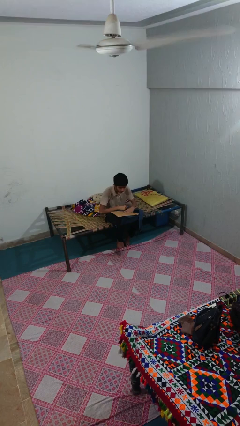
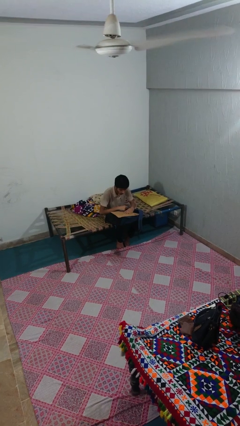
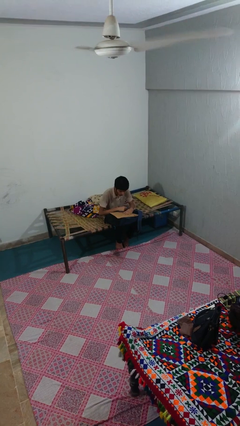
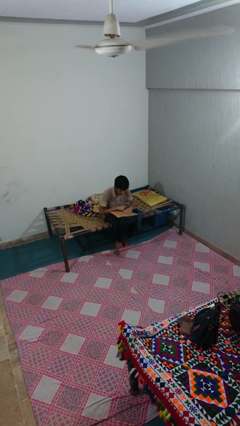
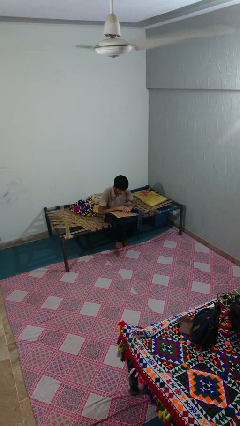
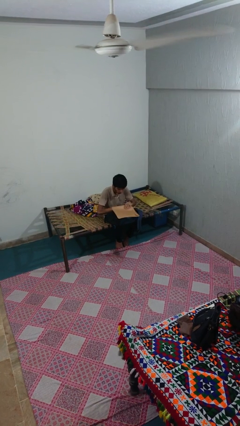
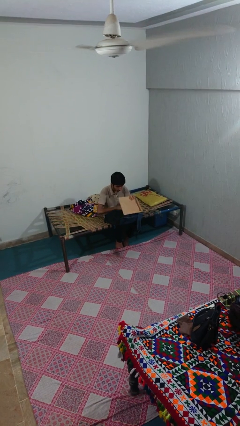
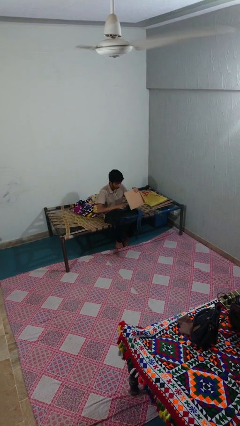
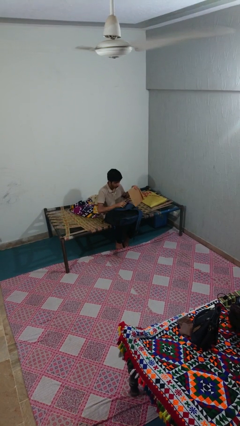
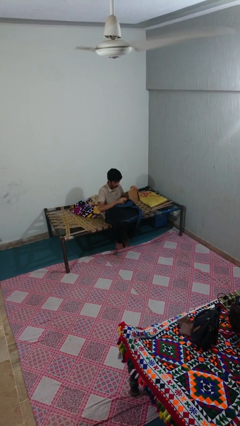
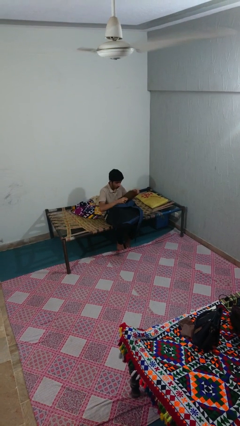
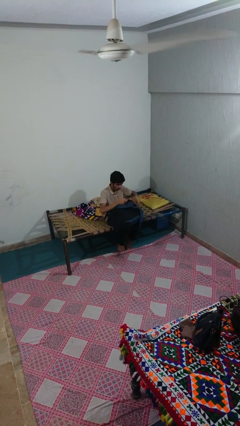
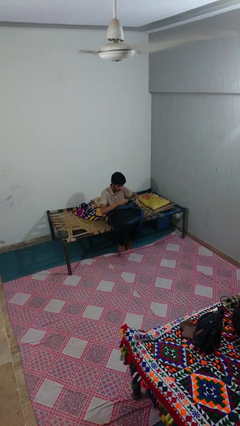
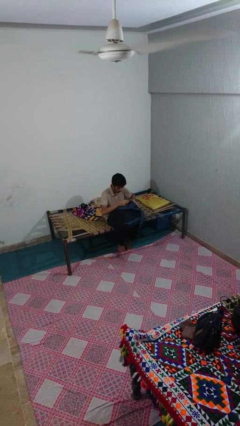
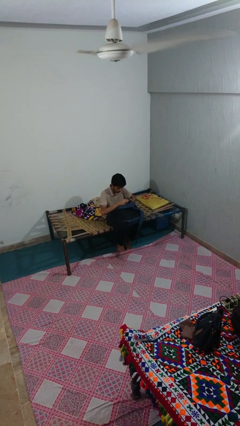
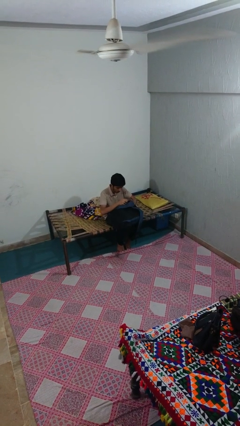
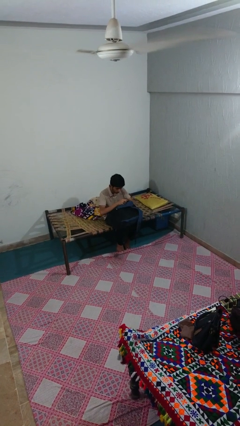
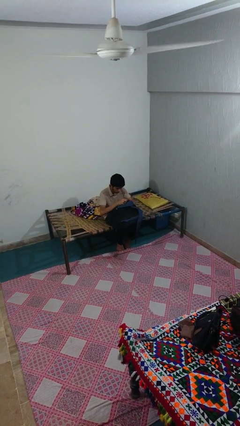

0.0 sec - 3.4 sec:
person puts object into backpack

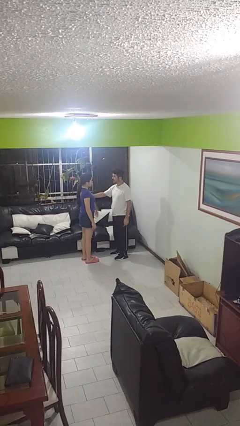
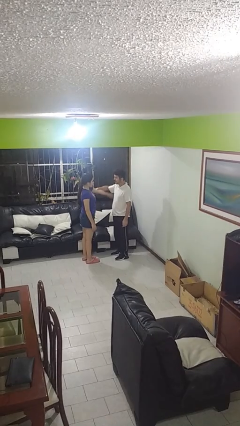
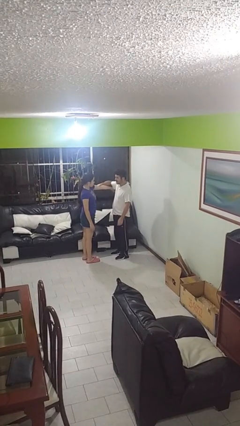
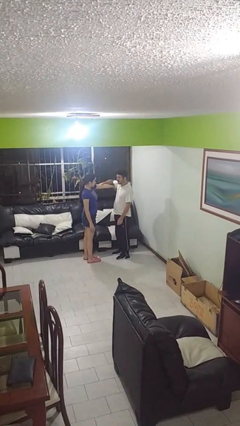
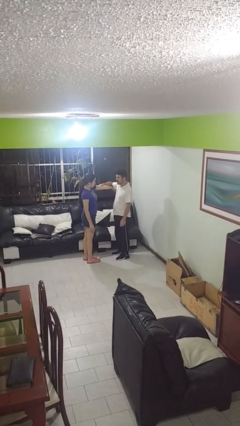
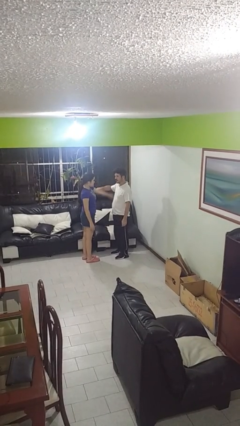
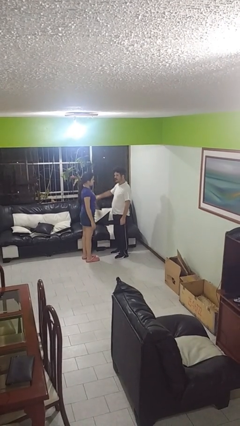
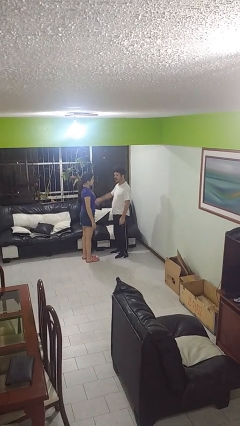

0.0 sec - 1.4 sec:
person grabs person by bicep

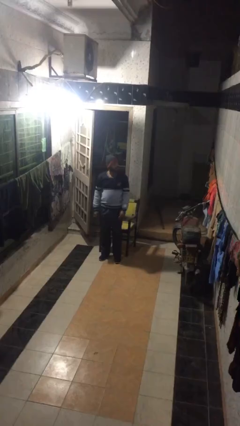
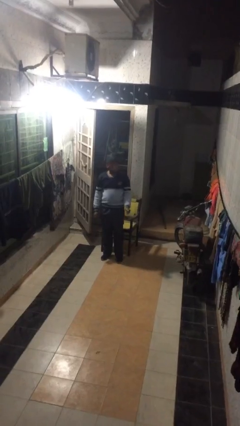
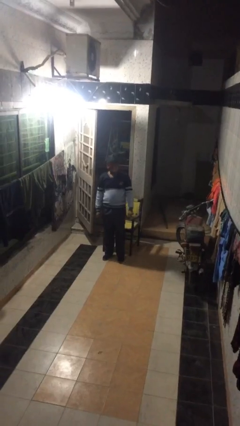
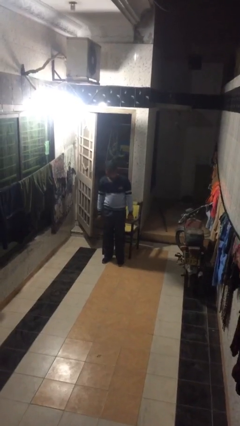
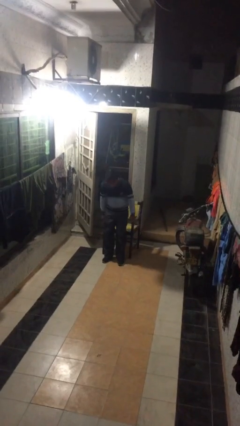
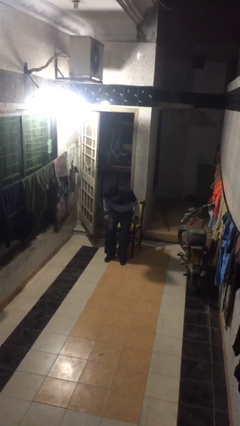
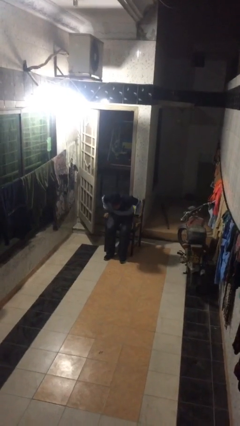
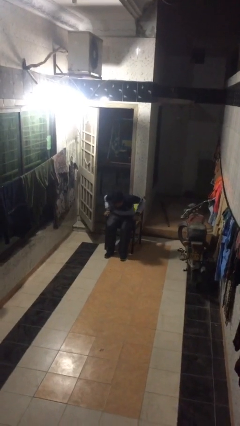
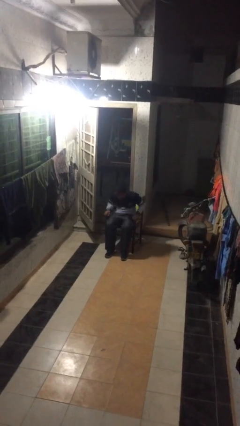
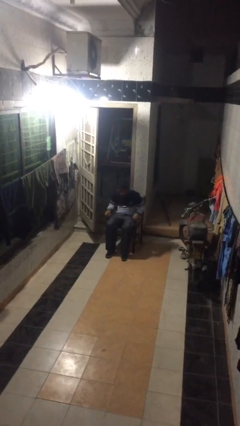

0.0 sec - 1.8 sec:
person sits down

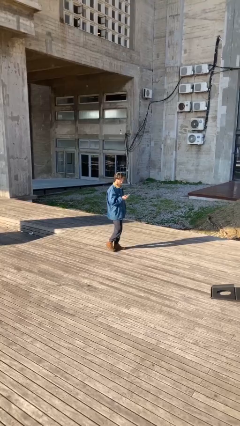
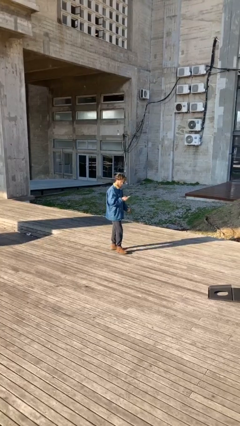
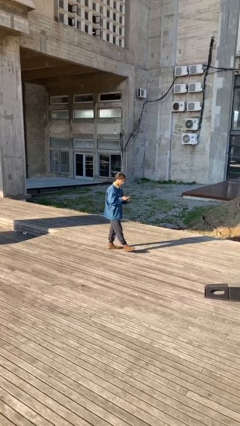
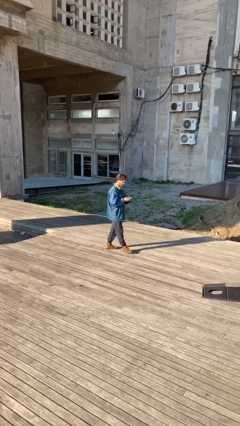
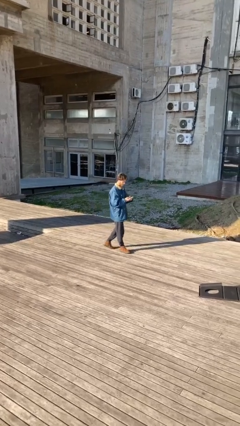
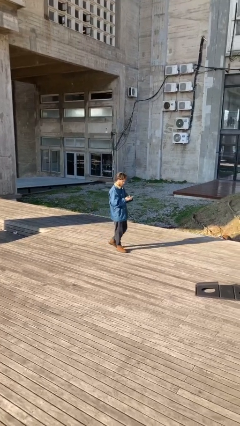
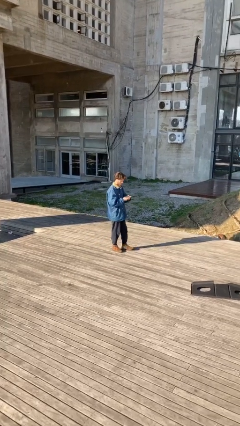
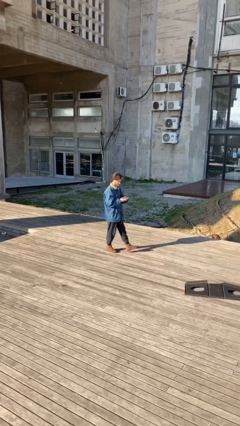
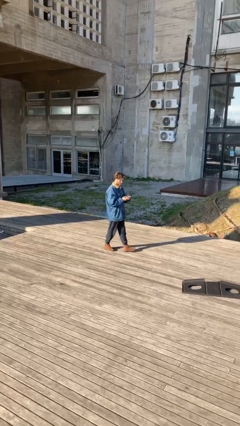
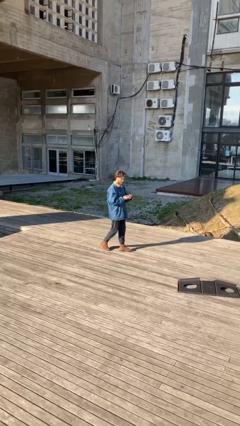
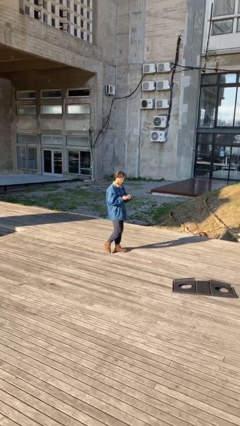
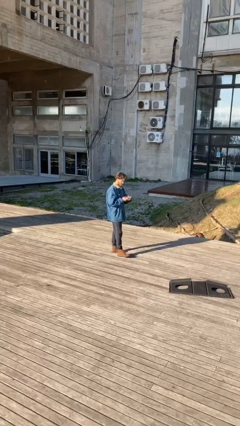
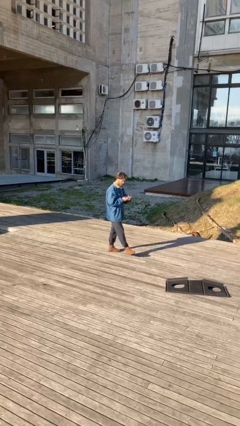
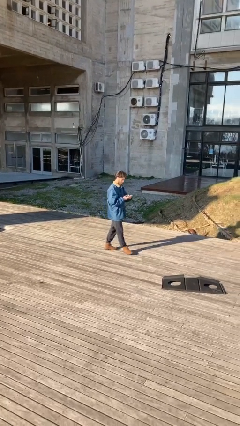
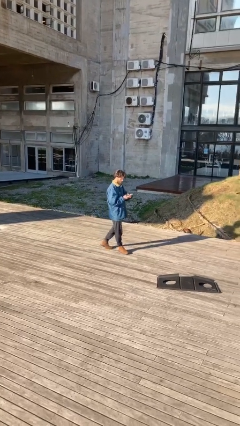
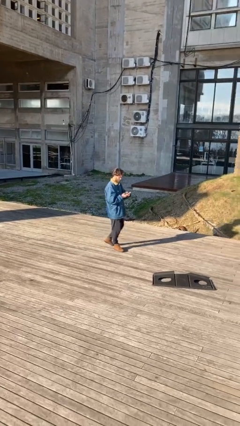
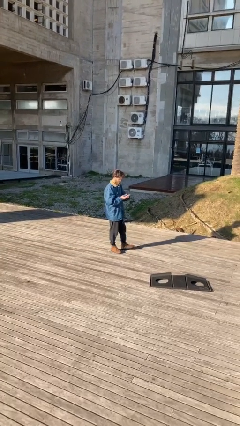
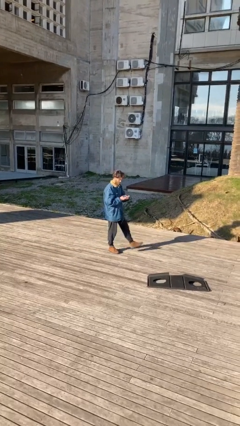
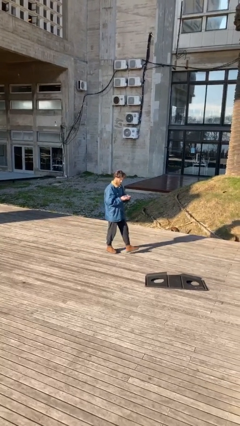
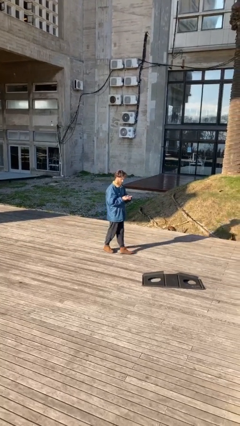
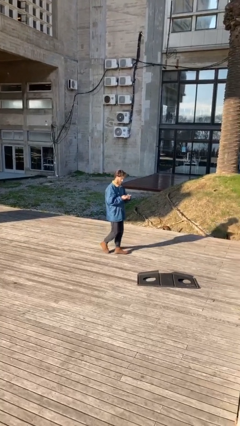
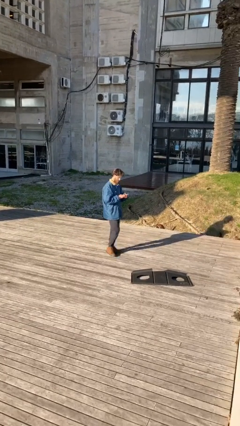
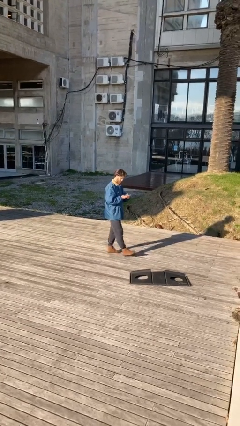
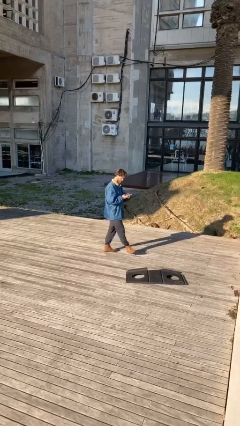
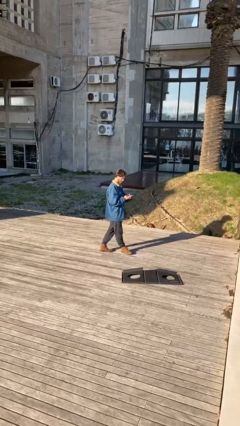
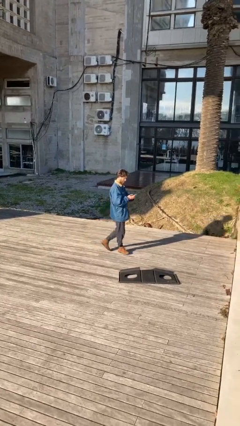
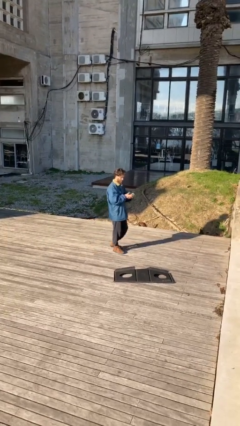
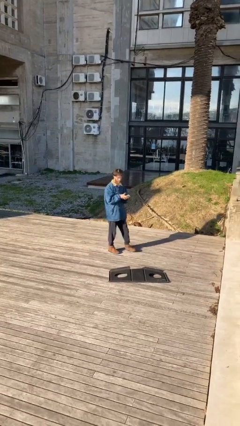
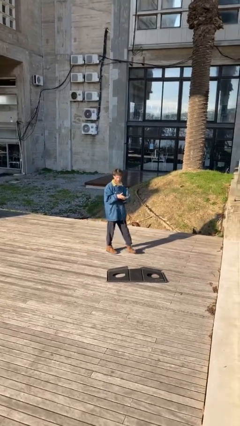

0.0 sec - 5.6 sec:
person texts on phone

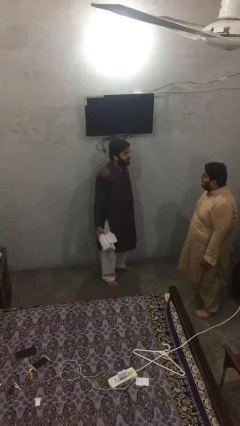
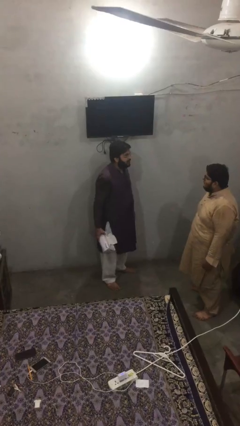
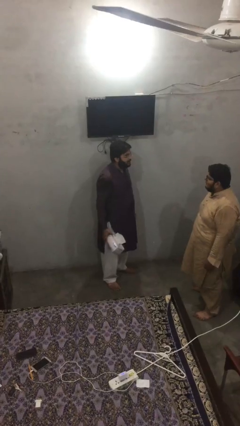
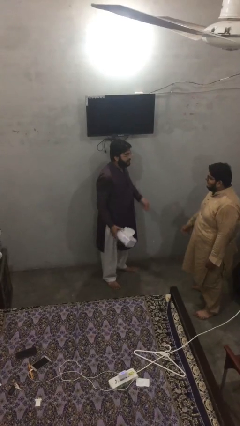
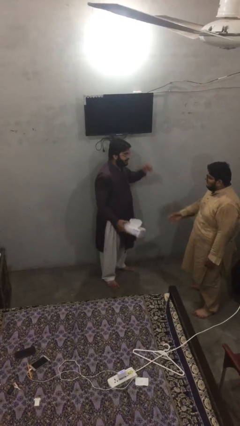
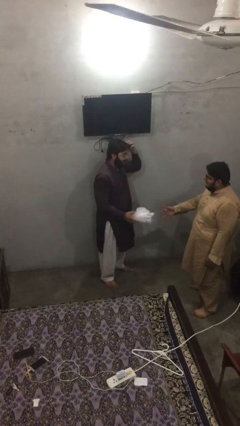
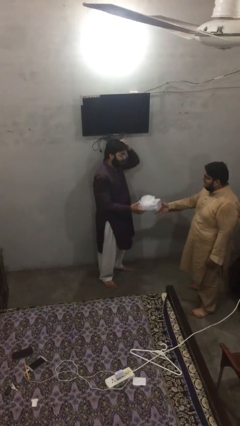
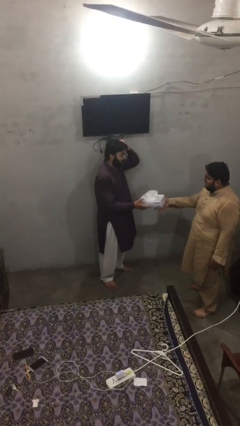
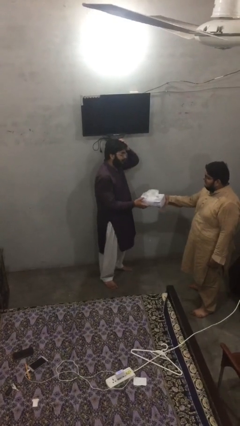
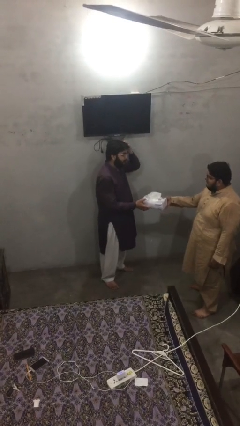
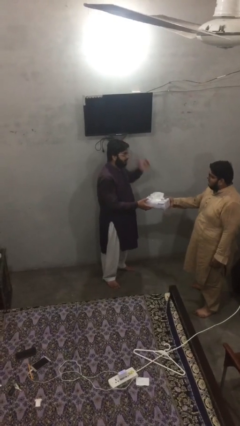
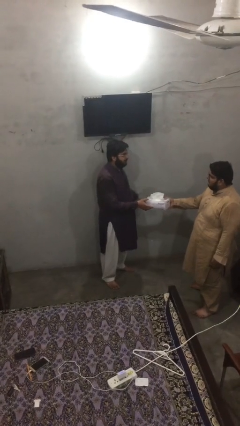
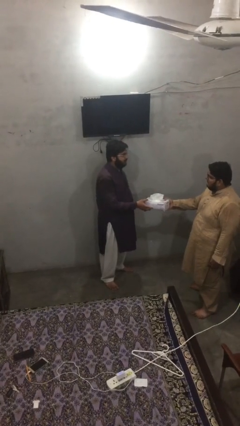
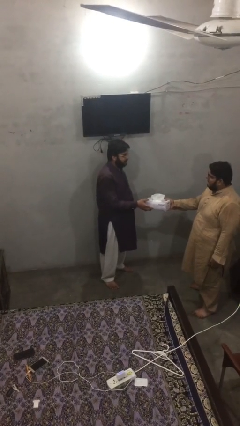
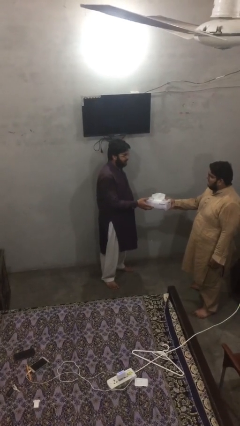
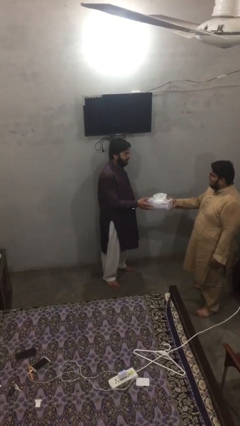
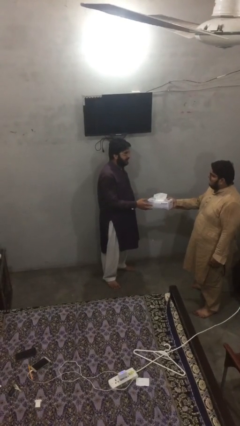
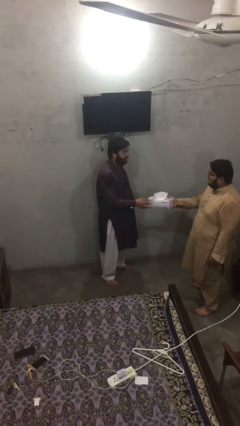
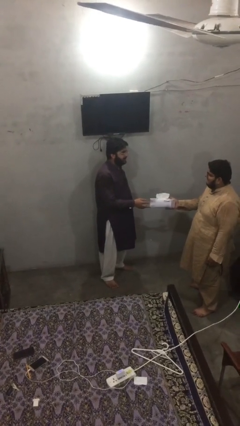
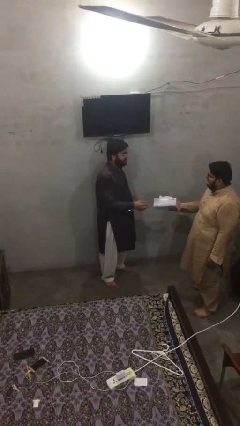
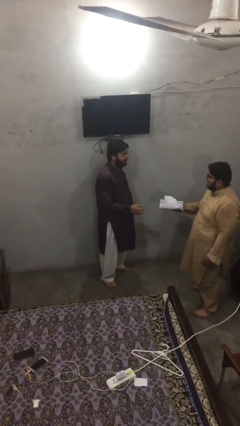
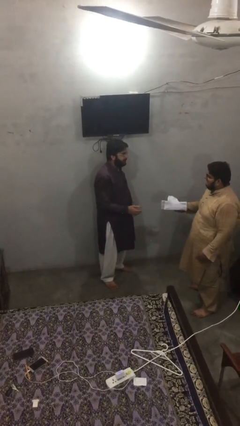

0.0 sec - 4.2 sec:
person transfers object to person

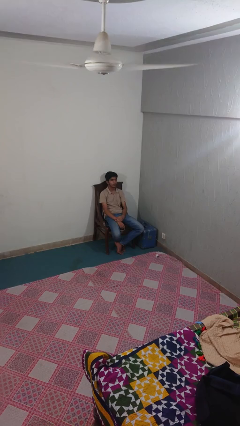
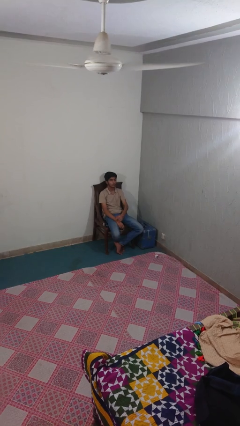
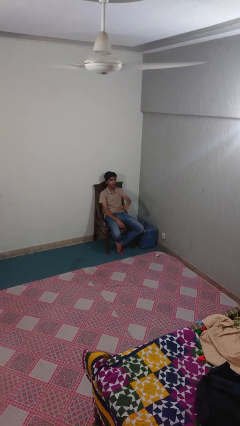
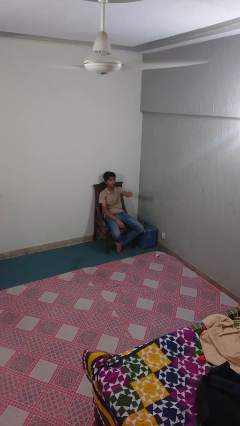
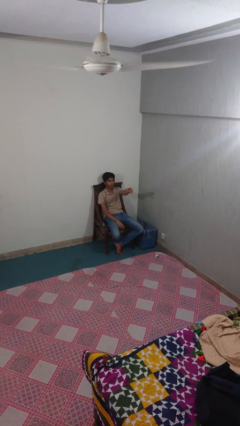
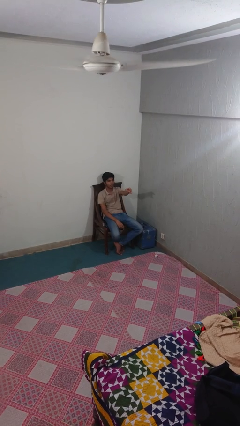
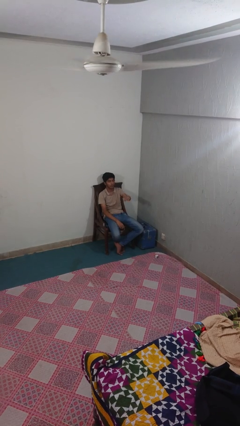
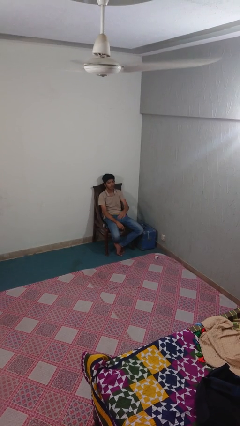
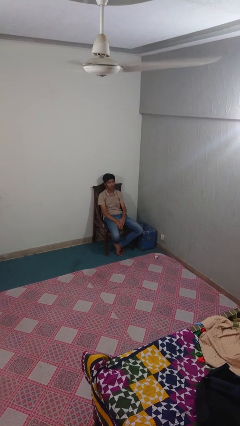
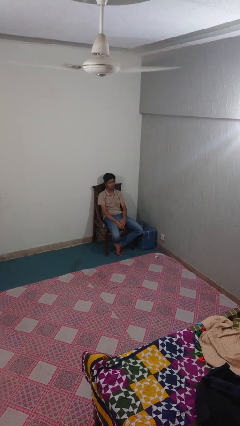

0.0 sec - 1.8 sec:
person points at person
